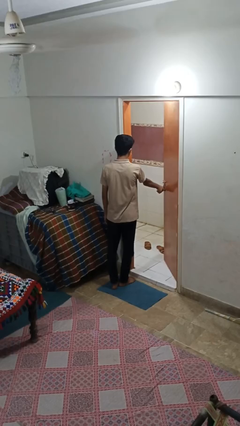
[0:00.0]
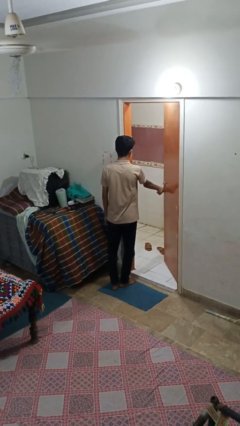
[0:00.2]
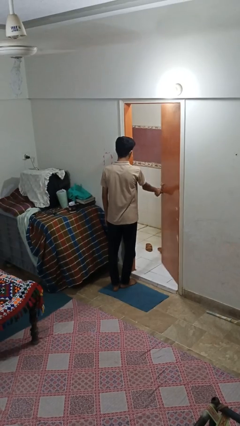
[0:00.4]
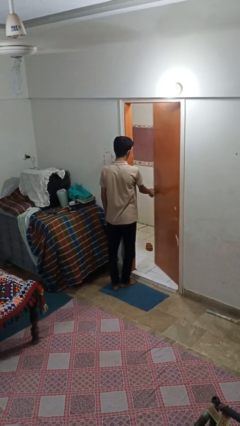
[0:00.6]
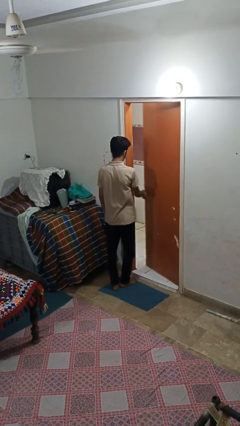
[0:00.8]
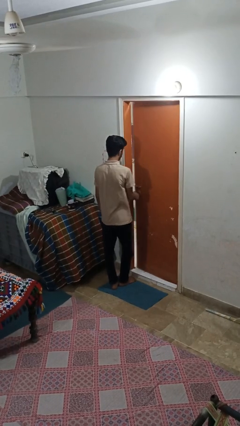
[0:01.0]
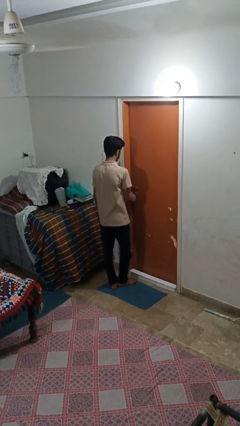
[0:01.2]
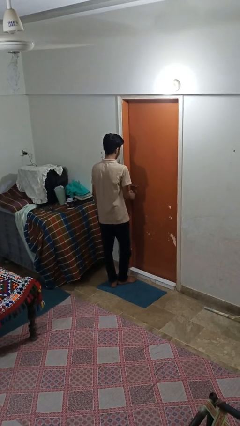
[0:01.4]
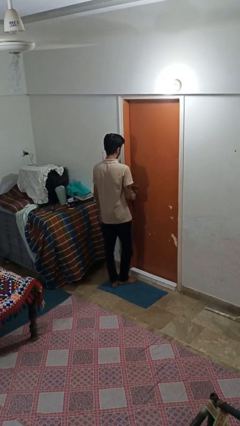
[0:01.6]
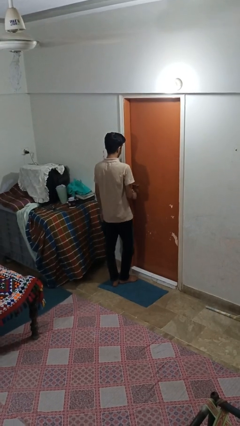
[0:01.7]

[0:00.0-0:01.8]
person closes facility door

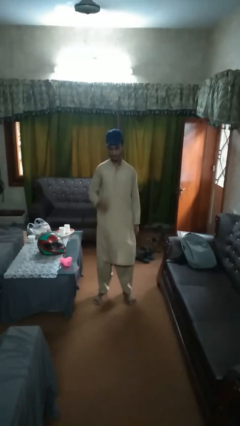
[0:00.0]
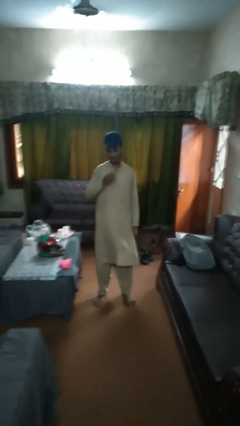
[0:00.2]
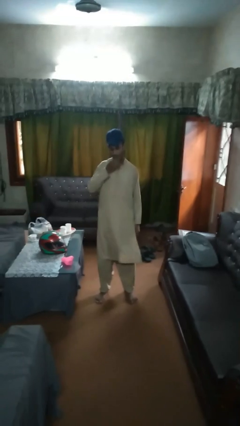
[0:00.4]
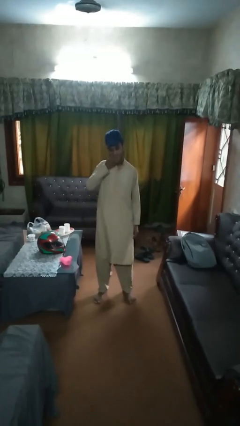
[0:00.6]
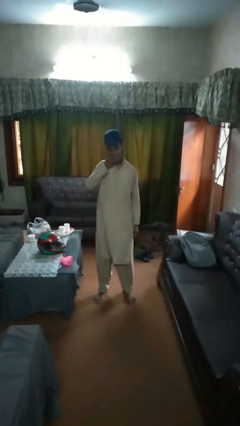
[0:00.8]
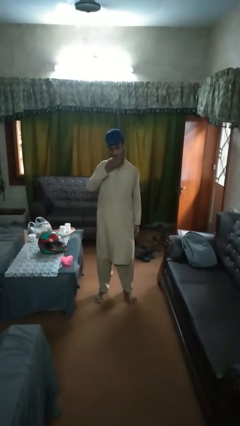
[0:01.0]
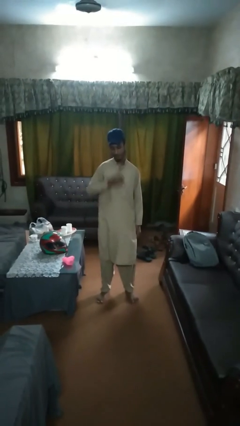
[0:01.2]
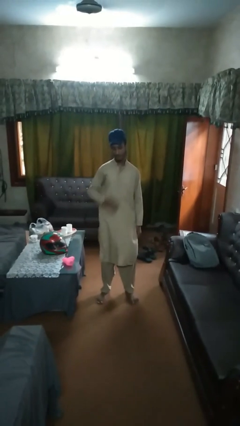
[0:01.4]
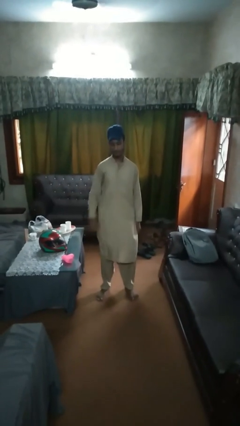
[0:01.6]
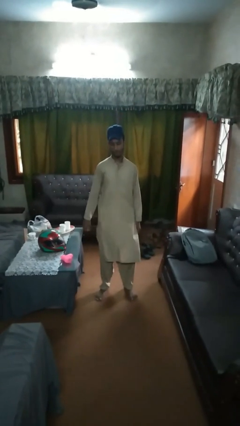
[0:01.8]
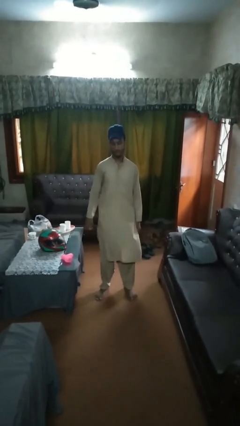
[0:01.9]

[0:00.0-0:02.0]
person eats banana

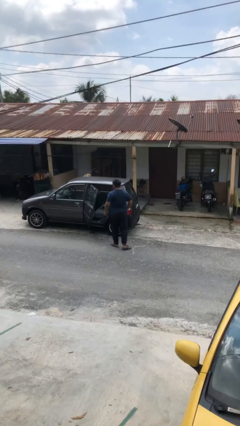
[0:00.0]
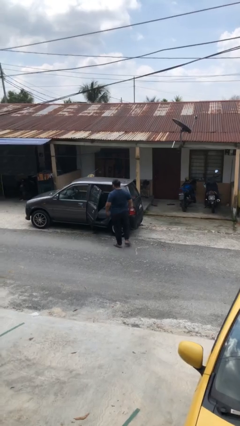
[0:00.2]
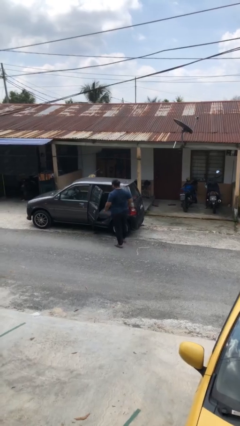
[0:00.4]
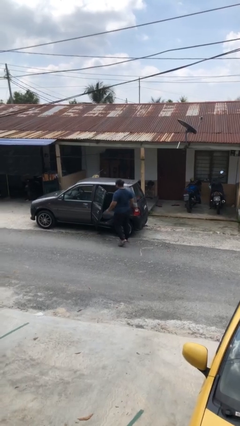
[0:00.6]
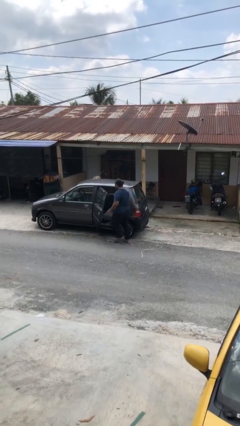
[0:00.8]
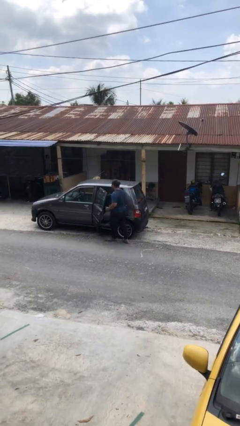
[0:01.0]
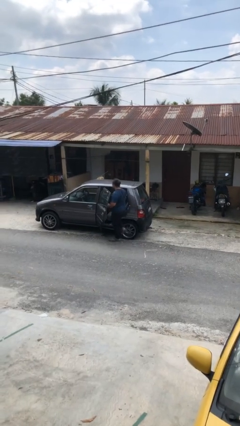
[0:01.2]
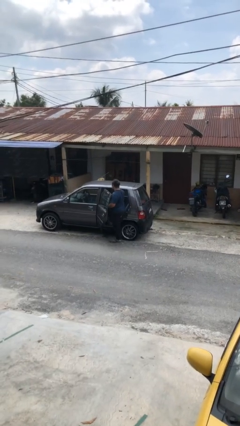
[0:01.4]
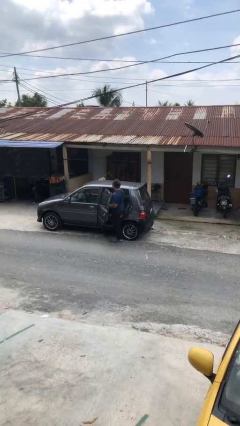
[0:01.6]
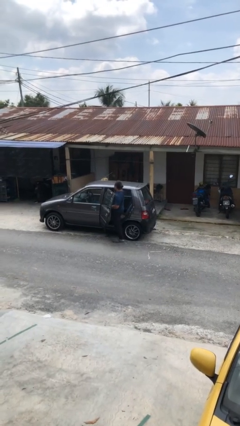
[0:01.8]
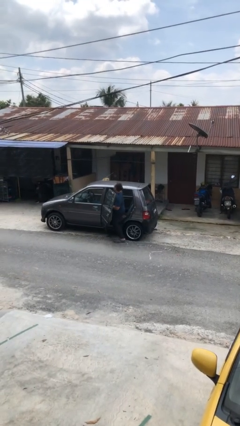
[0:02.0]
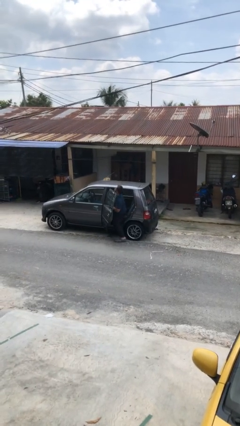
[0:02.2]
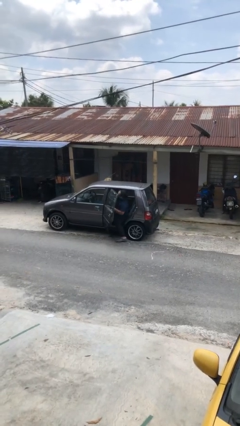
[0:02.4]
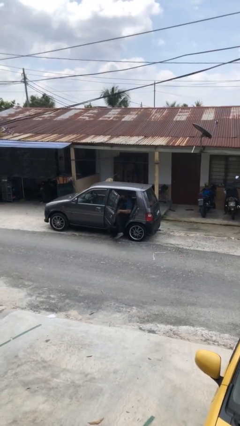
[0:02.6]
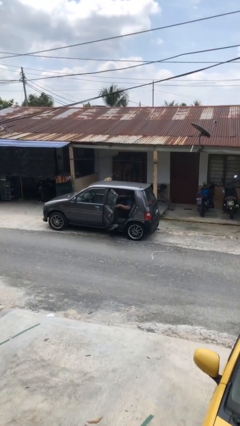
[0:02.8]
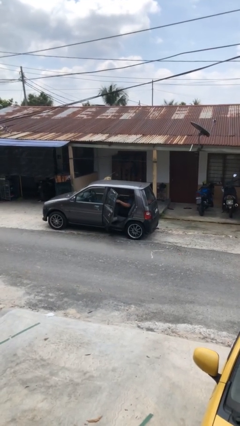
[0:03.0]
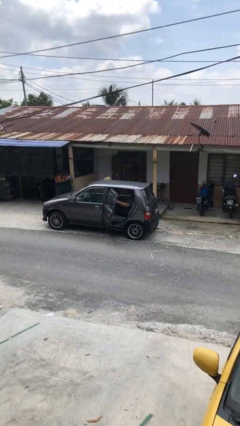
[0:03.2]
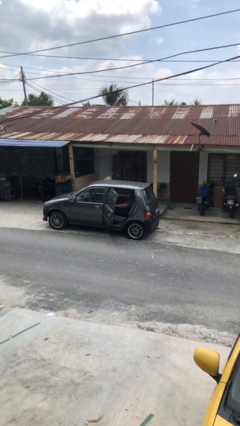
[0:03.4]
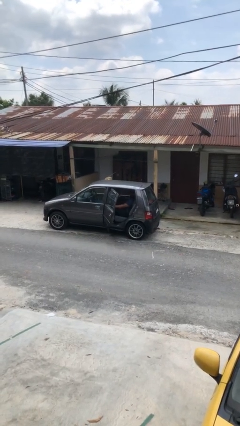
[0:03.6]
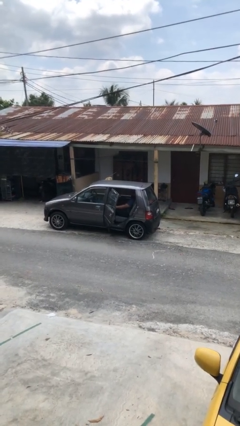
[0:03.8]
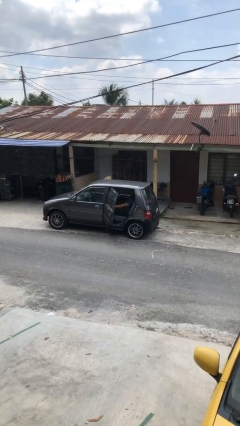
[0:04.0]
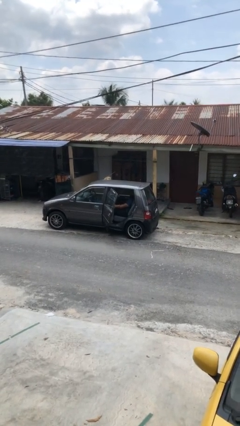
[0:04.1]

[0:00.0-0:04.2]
person enters car

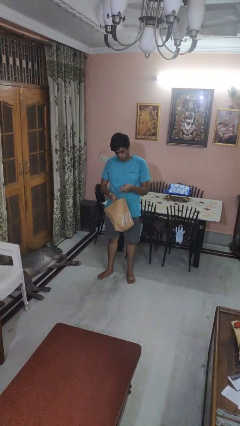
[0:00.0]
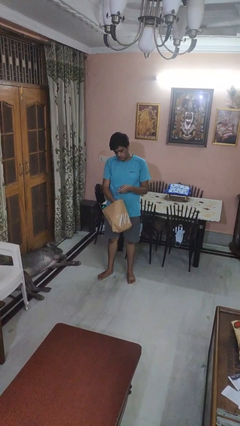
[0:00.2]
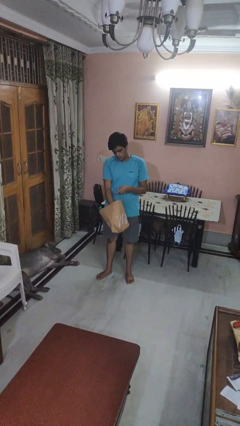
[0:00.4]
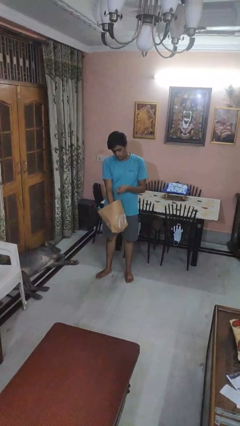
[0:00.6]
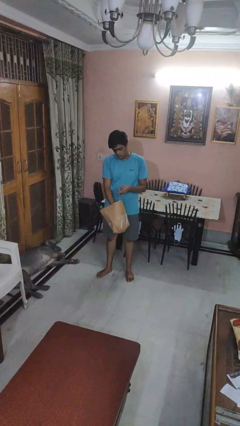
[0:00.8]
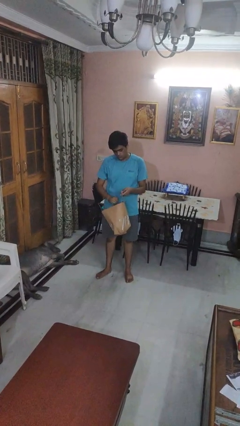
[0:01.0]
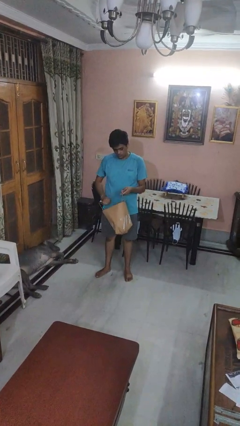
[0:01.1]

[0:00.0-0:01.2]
person puts object into bag

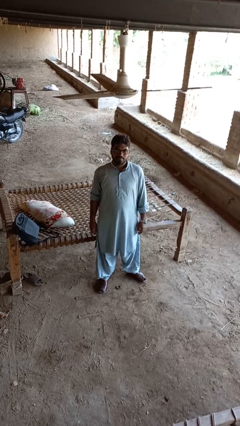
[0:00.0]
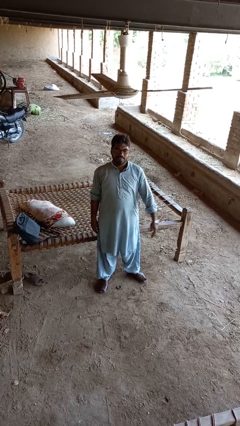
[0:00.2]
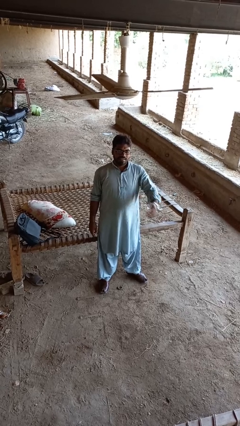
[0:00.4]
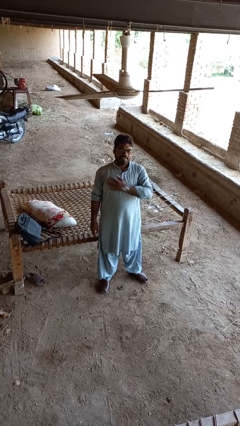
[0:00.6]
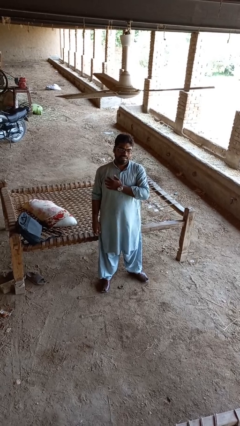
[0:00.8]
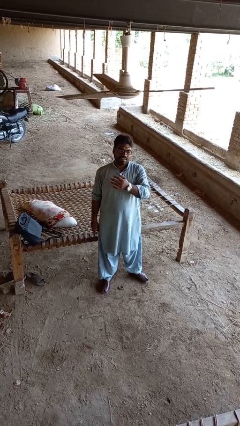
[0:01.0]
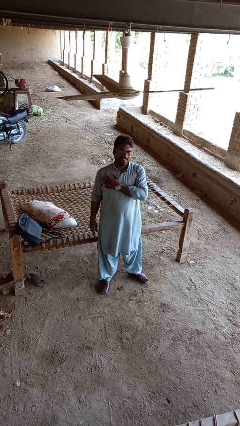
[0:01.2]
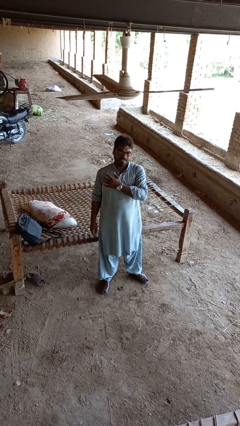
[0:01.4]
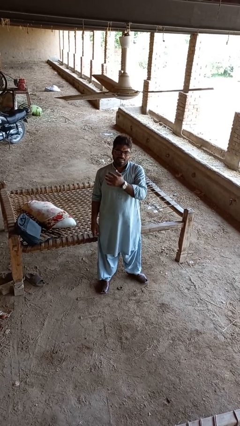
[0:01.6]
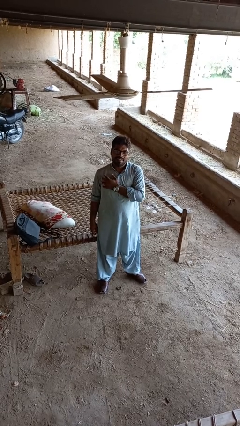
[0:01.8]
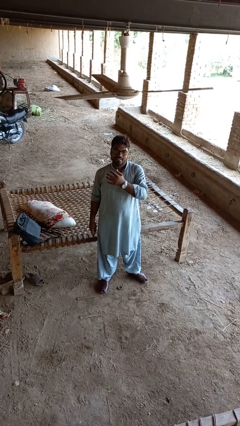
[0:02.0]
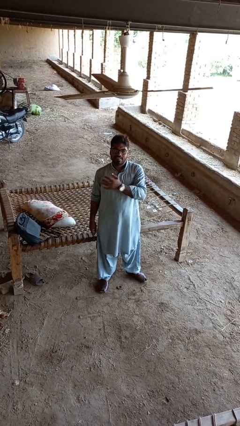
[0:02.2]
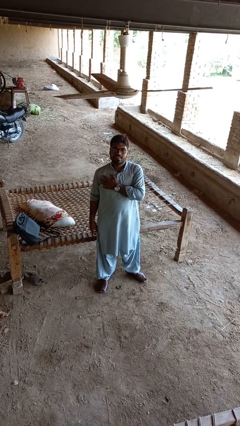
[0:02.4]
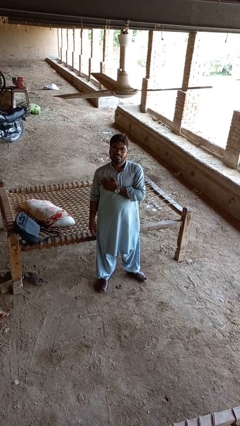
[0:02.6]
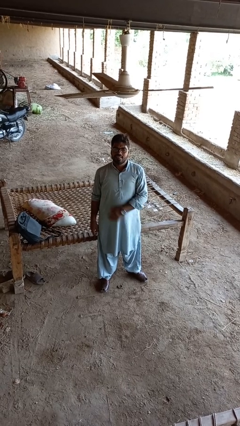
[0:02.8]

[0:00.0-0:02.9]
person drums on chest

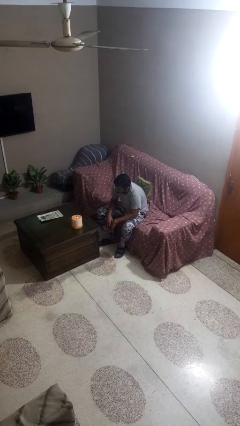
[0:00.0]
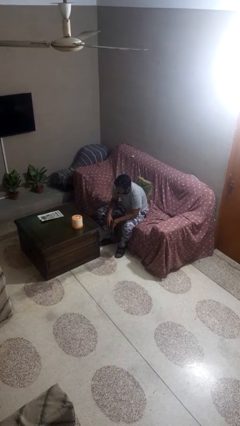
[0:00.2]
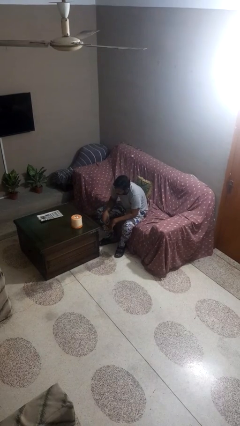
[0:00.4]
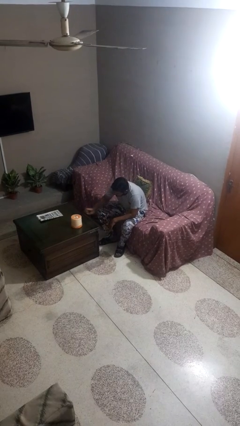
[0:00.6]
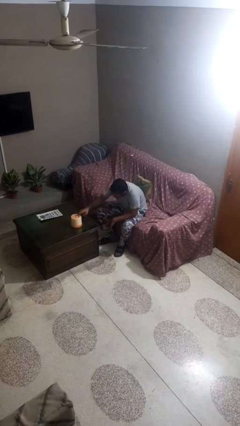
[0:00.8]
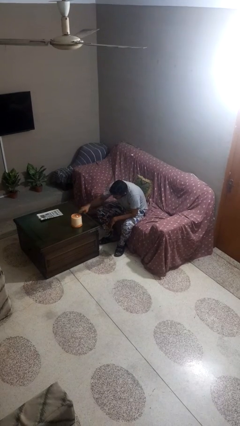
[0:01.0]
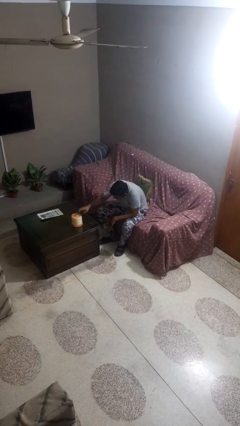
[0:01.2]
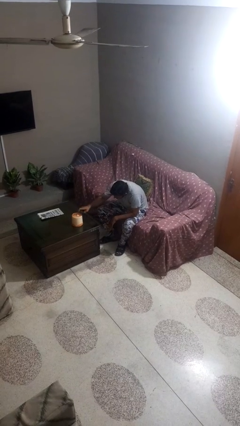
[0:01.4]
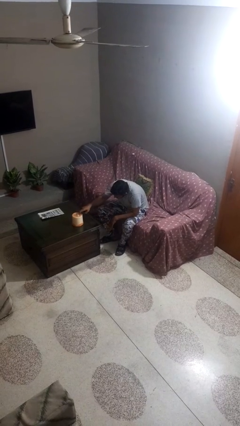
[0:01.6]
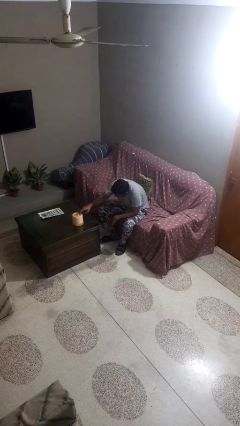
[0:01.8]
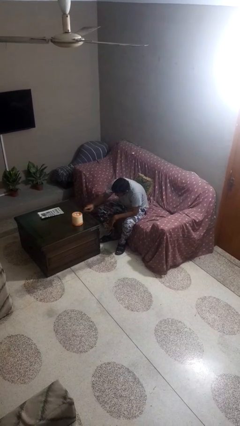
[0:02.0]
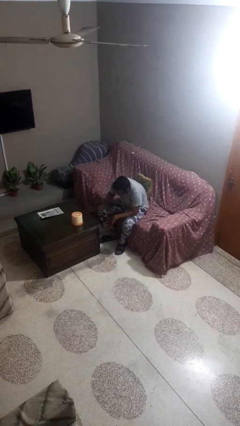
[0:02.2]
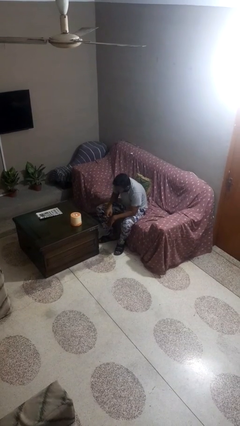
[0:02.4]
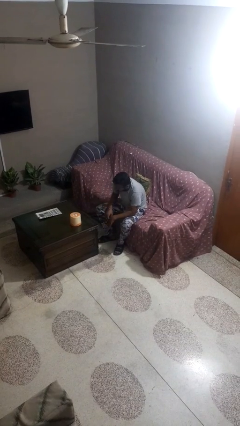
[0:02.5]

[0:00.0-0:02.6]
person taps object with finger

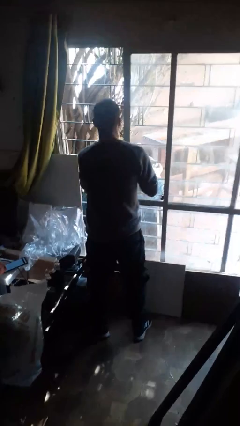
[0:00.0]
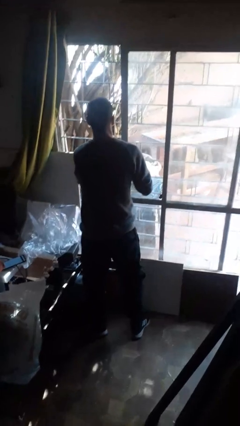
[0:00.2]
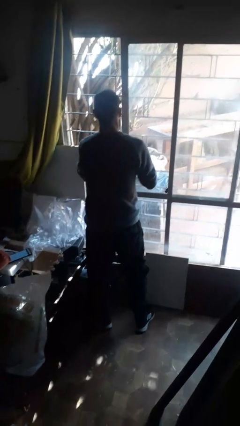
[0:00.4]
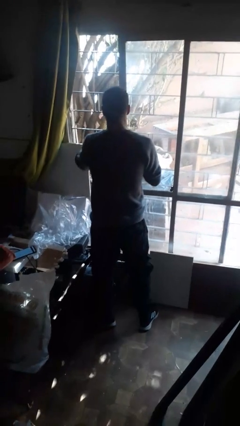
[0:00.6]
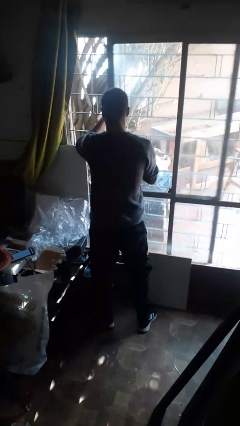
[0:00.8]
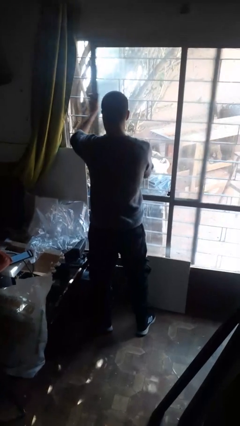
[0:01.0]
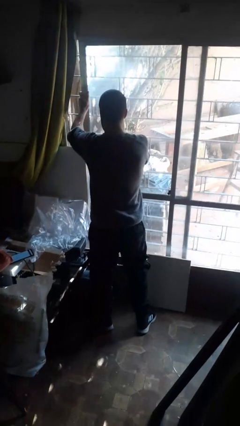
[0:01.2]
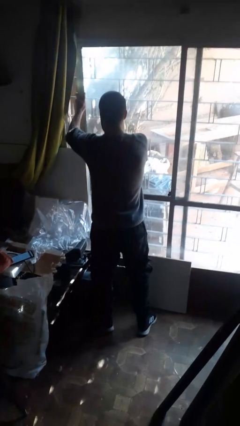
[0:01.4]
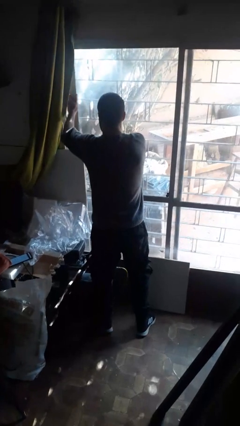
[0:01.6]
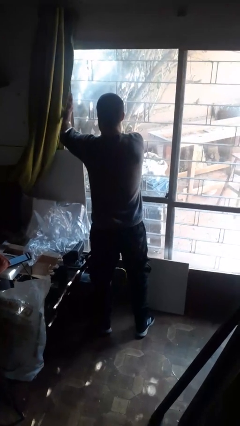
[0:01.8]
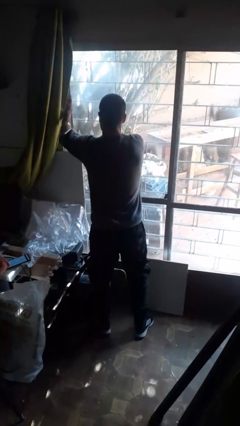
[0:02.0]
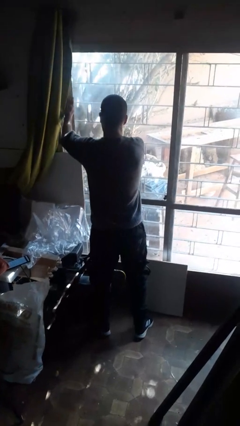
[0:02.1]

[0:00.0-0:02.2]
person closes sliding door
